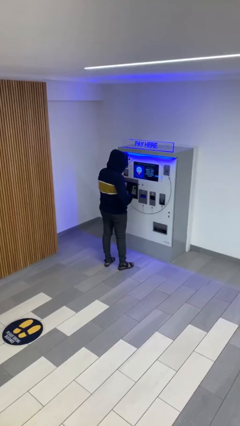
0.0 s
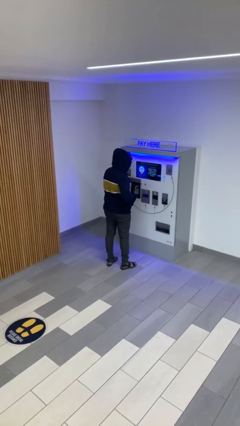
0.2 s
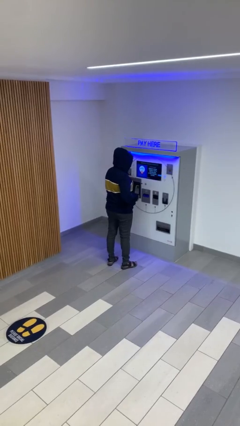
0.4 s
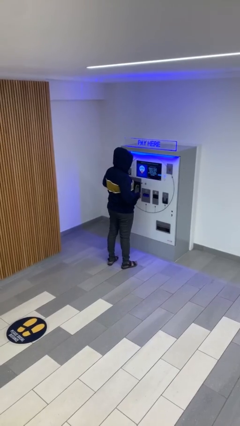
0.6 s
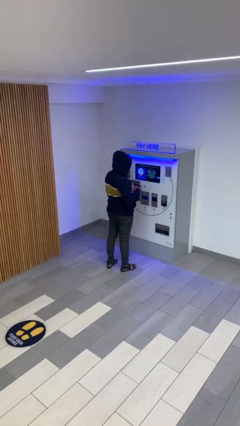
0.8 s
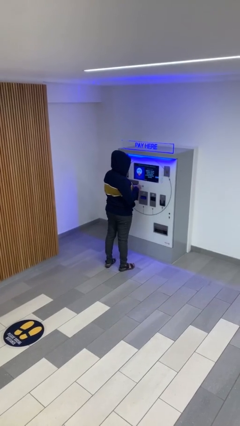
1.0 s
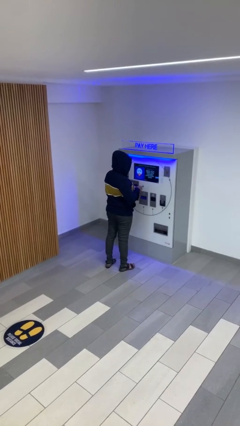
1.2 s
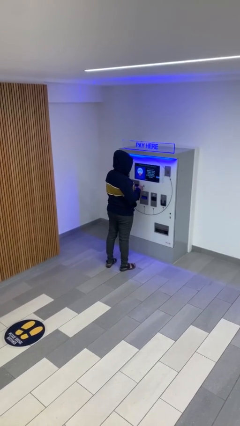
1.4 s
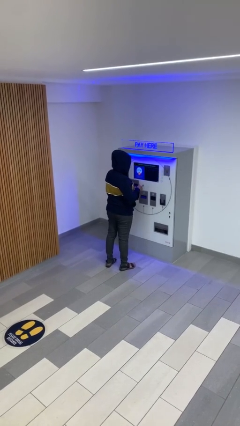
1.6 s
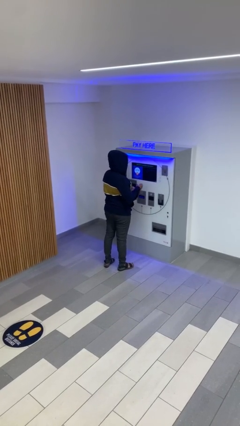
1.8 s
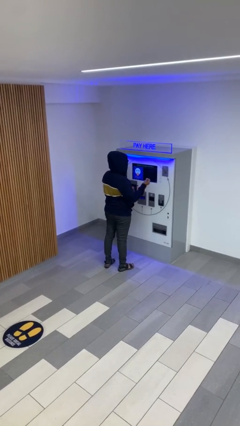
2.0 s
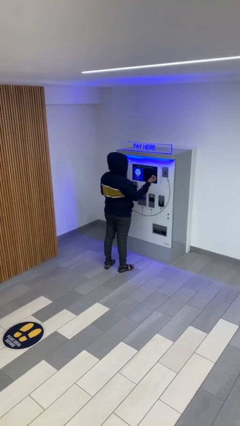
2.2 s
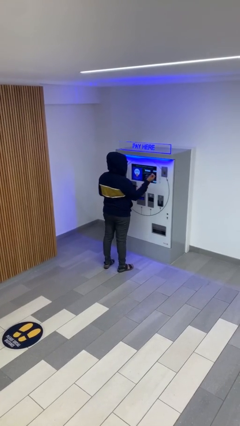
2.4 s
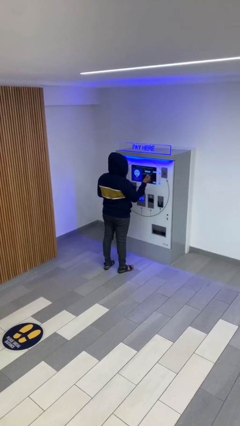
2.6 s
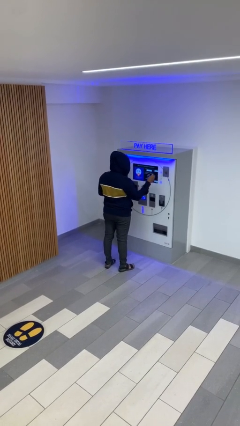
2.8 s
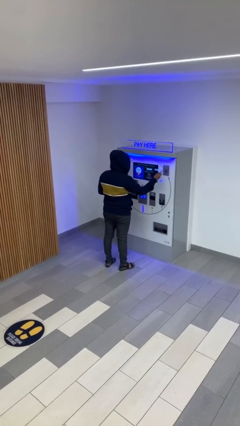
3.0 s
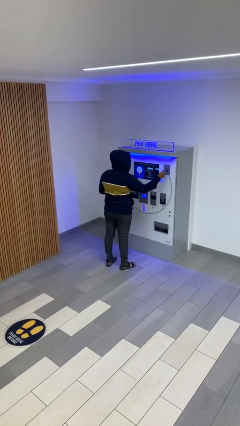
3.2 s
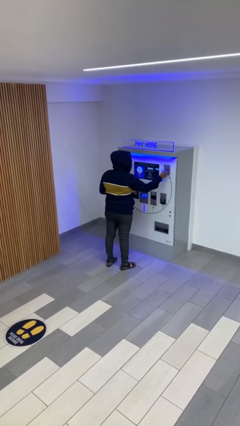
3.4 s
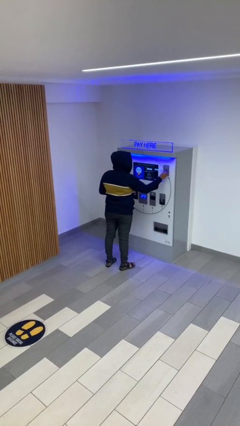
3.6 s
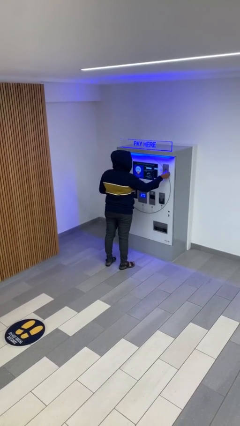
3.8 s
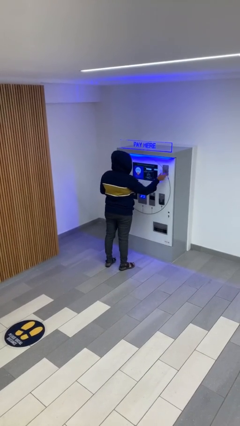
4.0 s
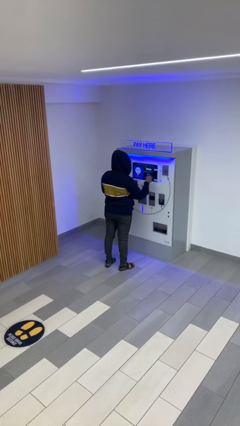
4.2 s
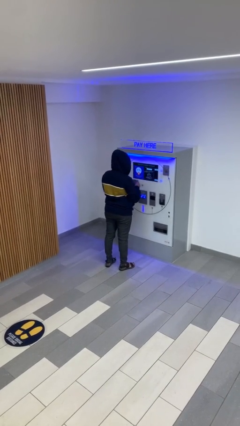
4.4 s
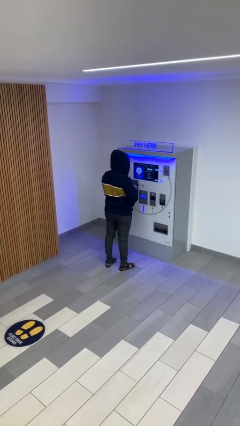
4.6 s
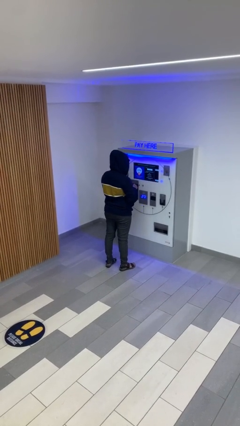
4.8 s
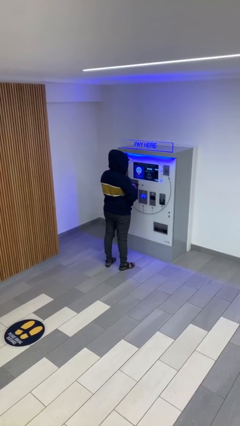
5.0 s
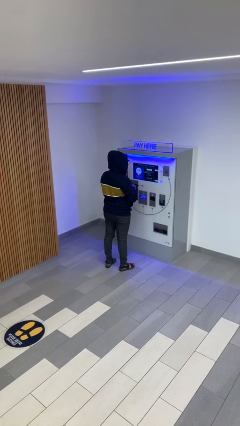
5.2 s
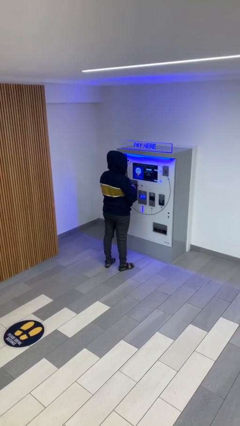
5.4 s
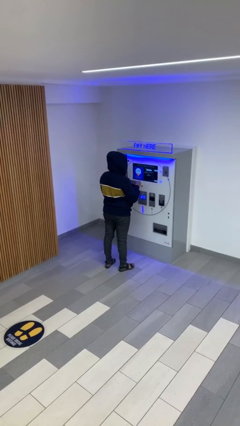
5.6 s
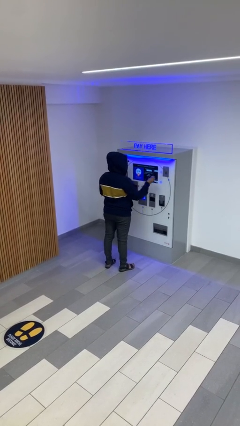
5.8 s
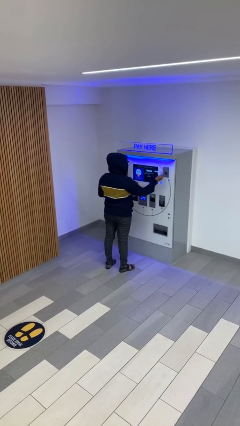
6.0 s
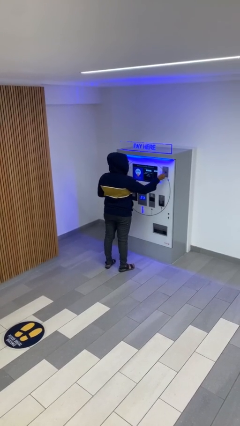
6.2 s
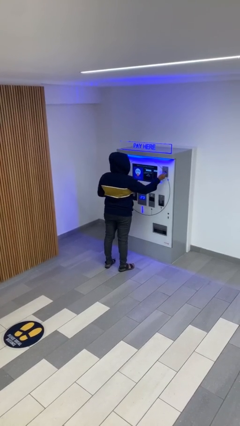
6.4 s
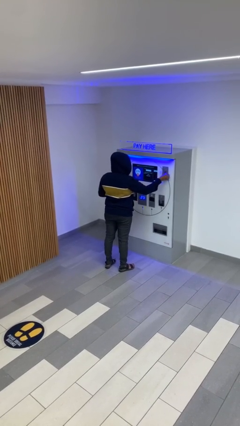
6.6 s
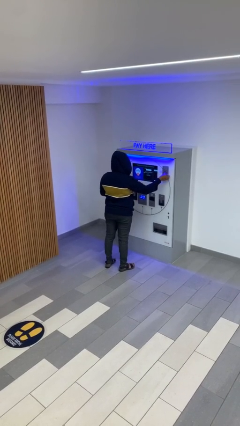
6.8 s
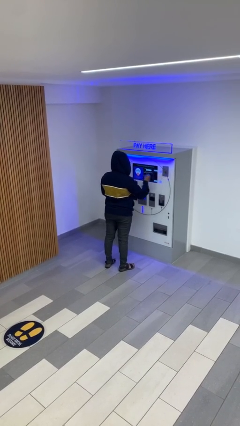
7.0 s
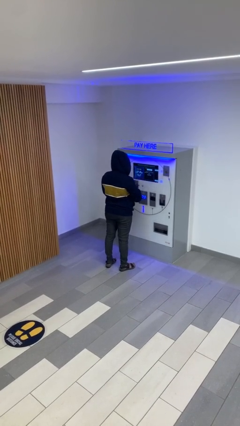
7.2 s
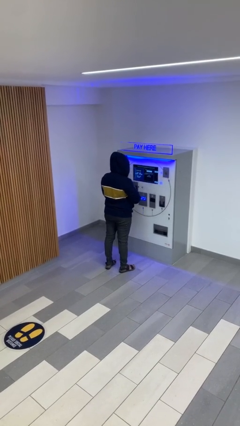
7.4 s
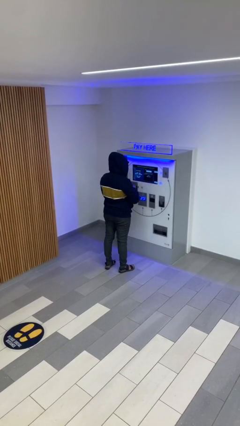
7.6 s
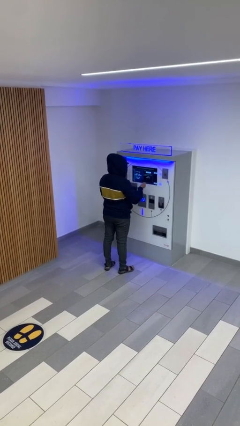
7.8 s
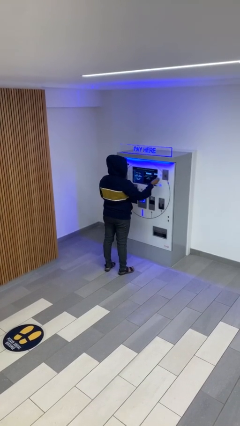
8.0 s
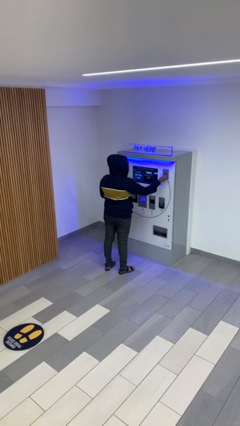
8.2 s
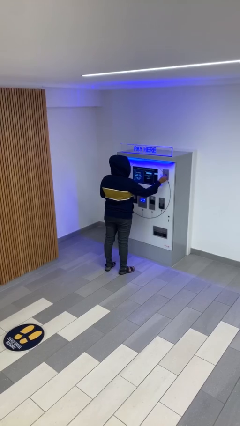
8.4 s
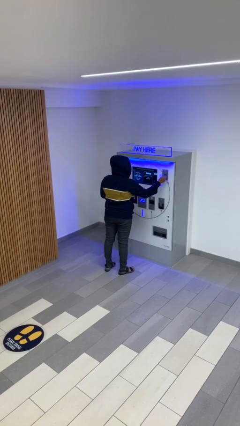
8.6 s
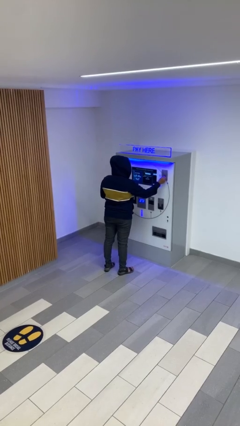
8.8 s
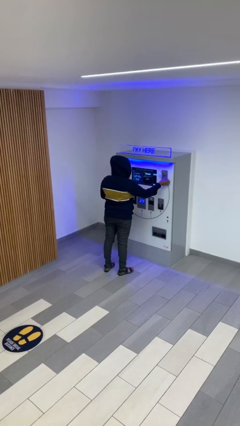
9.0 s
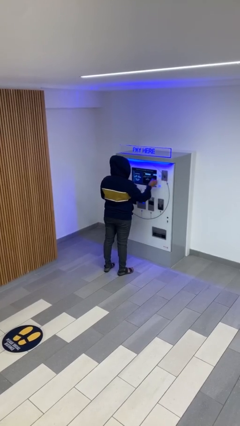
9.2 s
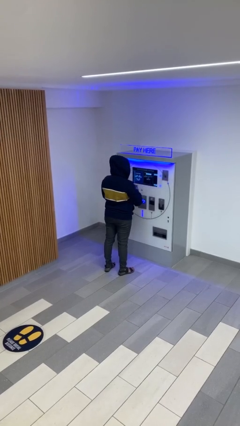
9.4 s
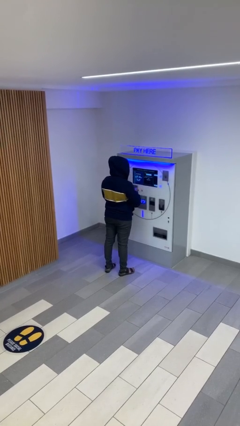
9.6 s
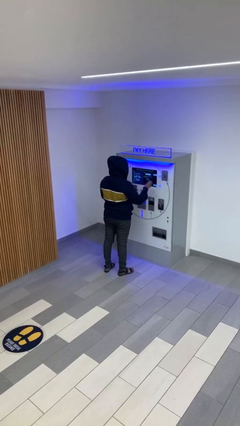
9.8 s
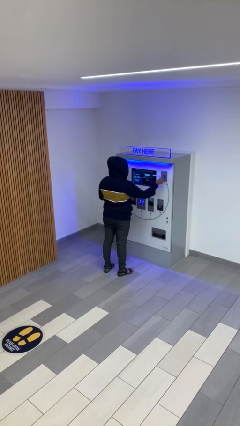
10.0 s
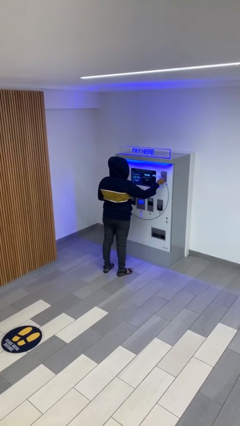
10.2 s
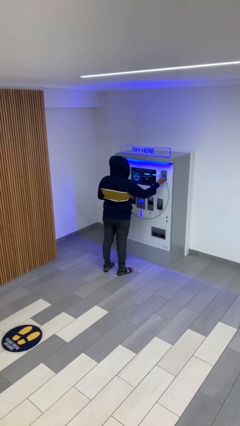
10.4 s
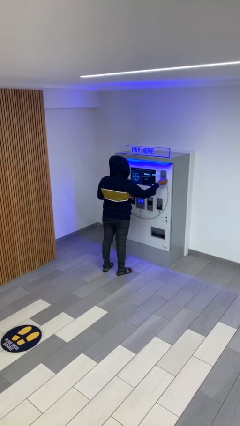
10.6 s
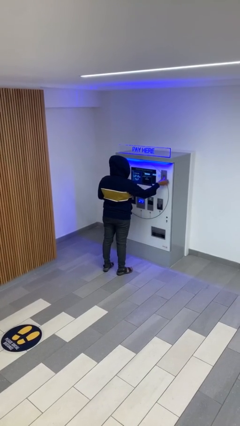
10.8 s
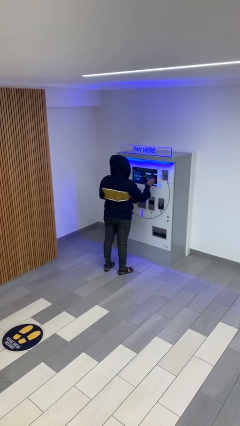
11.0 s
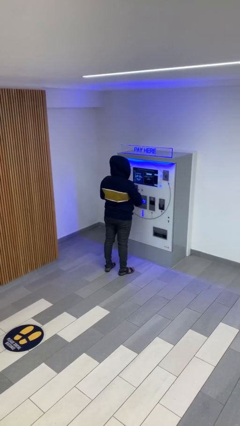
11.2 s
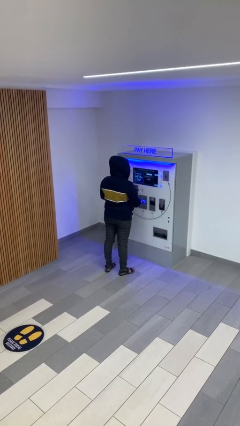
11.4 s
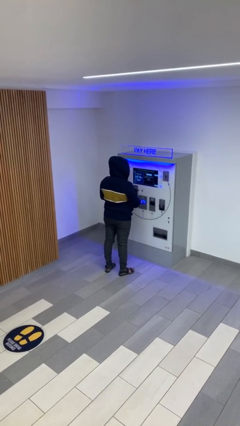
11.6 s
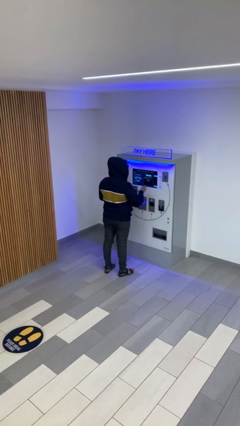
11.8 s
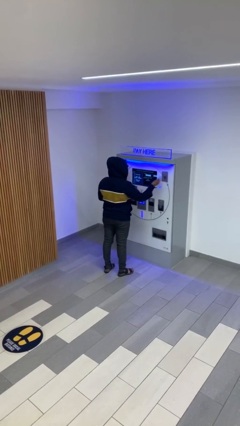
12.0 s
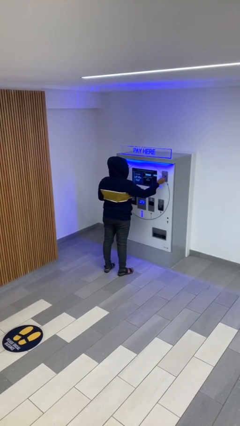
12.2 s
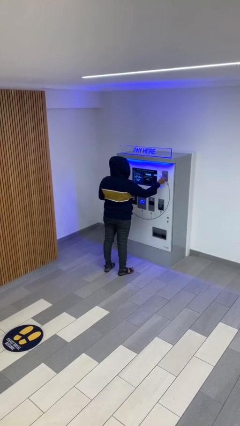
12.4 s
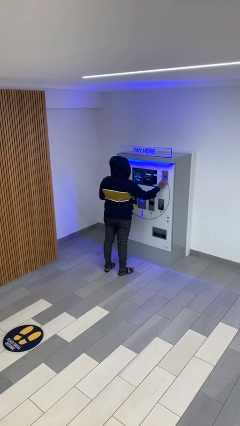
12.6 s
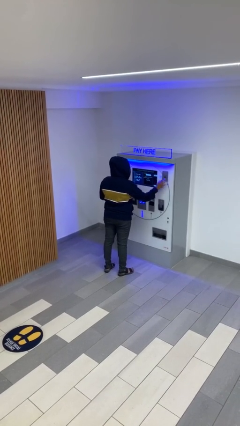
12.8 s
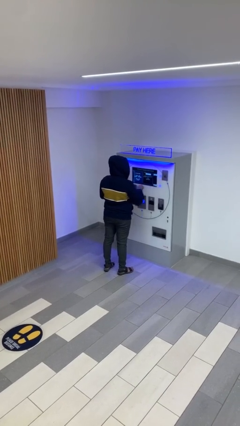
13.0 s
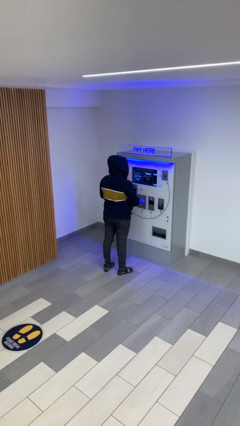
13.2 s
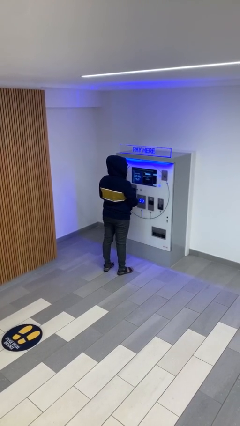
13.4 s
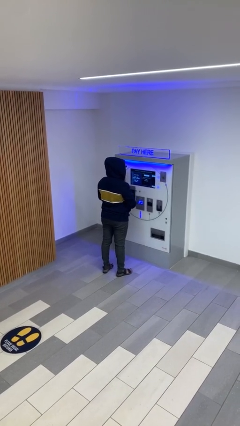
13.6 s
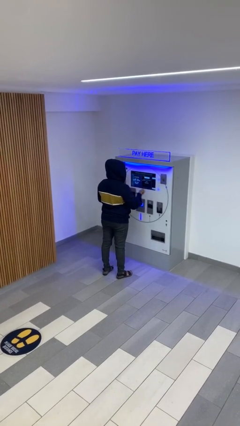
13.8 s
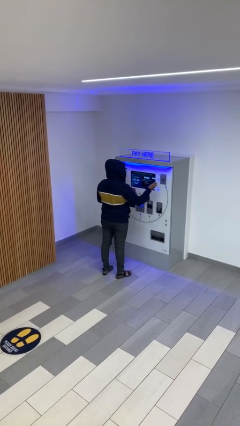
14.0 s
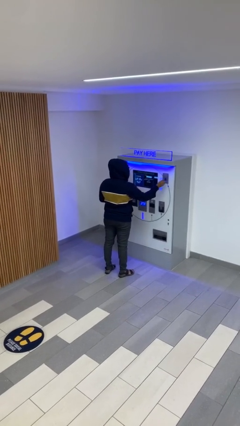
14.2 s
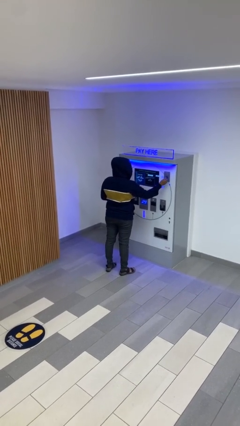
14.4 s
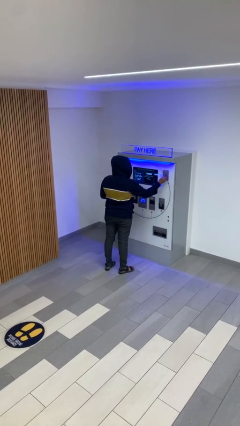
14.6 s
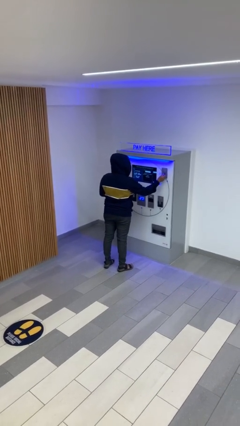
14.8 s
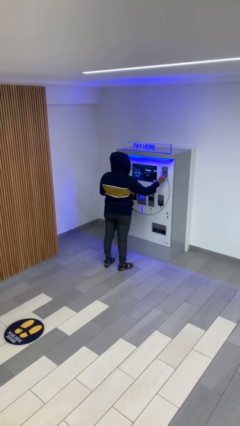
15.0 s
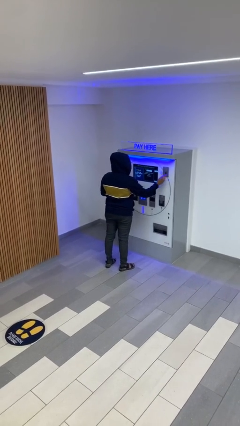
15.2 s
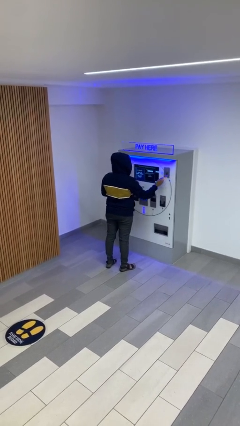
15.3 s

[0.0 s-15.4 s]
person purchases from machine

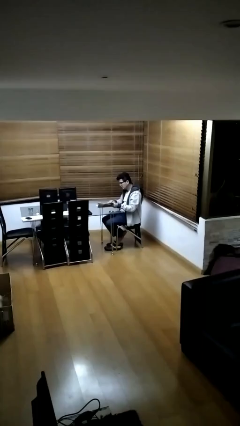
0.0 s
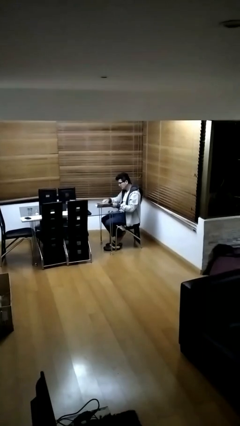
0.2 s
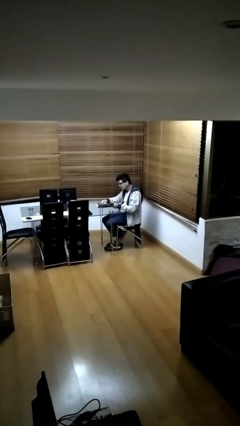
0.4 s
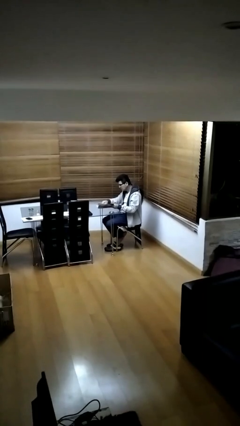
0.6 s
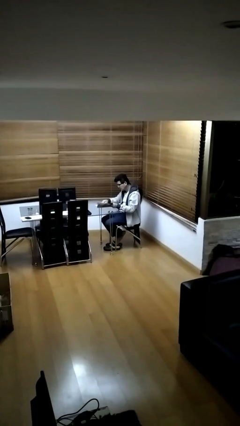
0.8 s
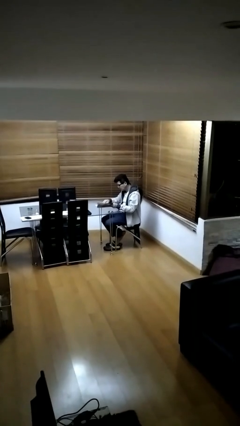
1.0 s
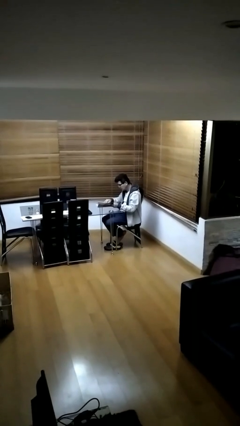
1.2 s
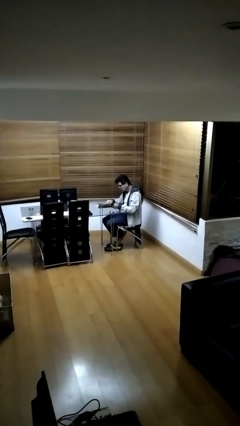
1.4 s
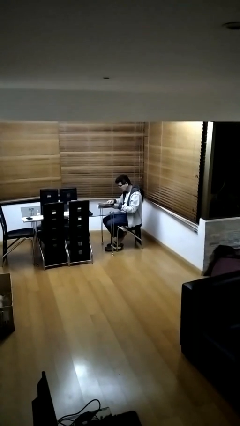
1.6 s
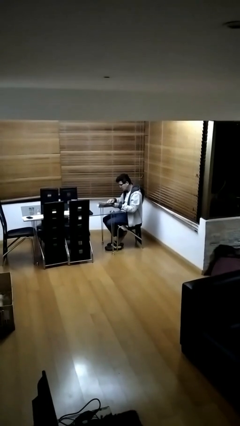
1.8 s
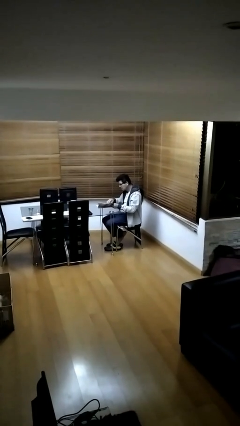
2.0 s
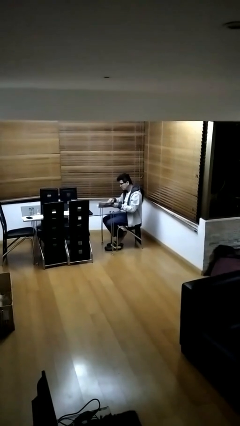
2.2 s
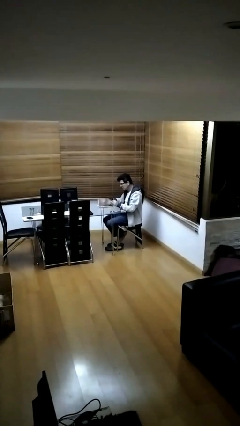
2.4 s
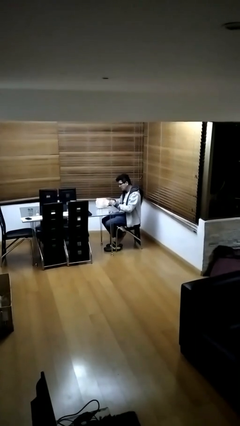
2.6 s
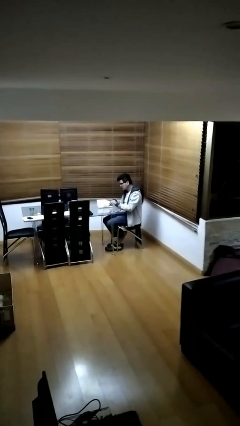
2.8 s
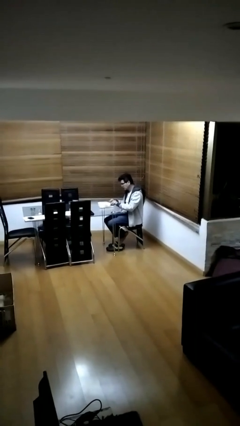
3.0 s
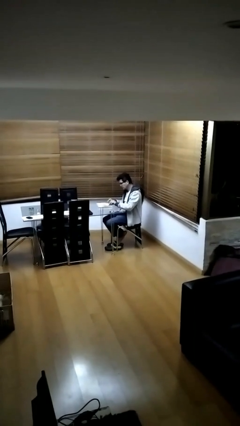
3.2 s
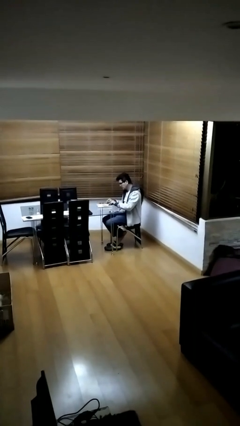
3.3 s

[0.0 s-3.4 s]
person reads document
